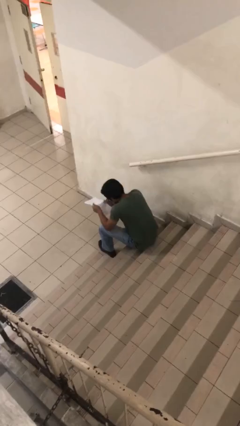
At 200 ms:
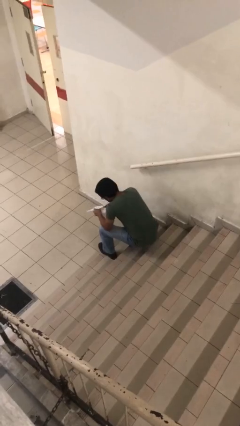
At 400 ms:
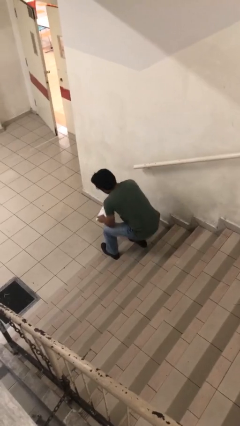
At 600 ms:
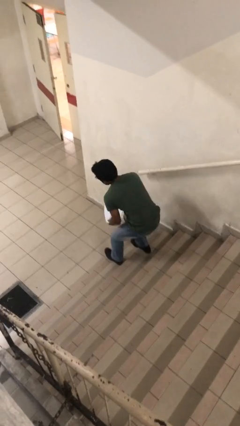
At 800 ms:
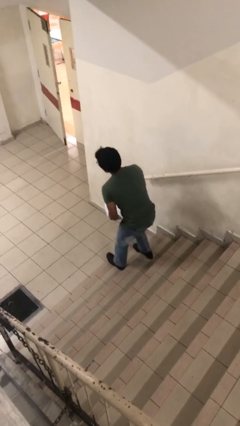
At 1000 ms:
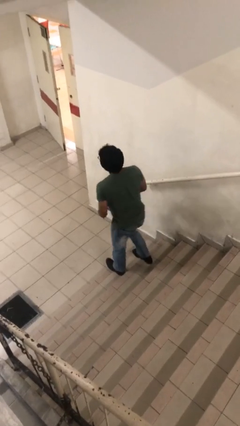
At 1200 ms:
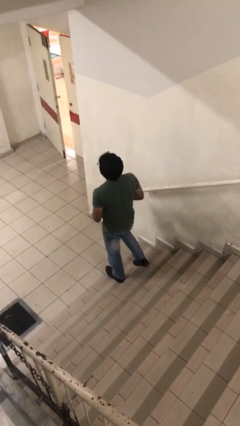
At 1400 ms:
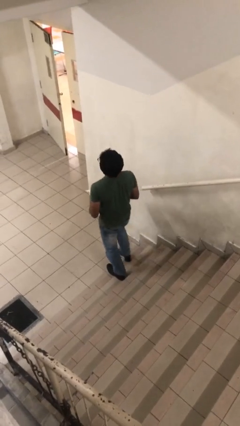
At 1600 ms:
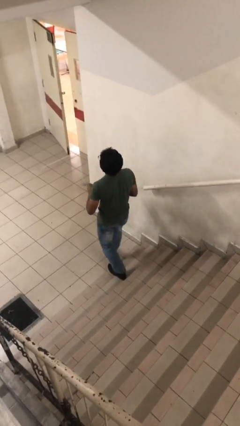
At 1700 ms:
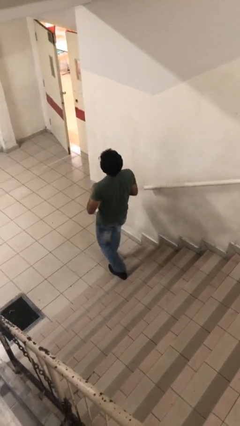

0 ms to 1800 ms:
person stands up

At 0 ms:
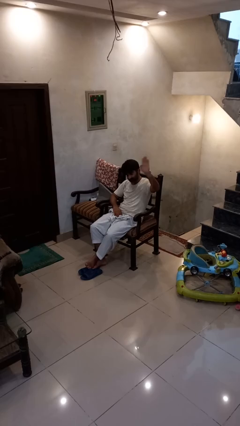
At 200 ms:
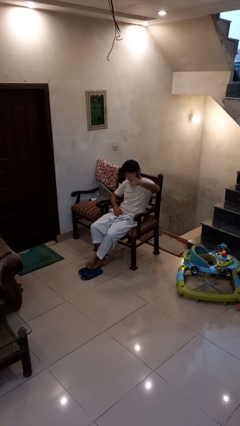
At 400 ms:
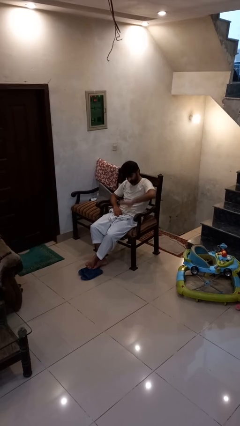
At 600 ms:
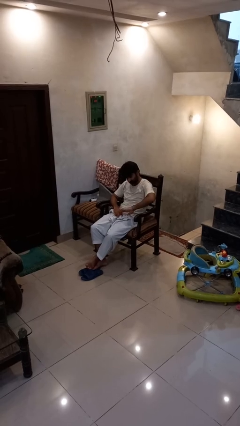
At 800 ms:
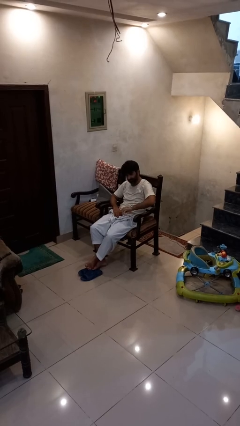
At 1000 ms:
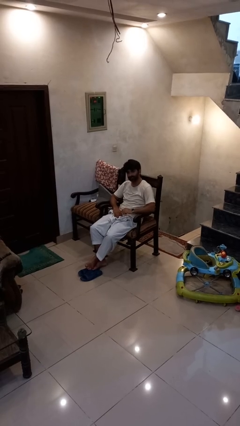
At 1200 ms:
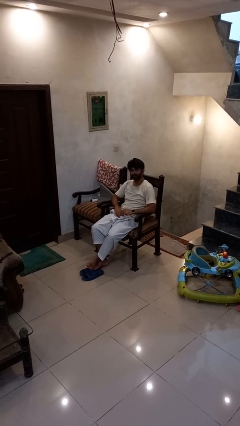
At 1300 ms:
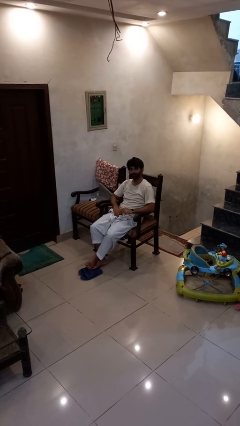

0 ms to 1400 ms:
person gestures swipe down

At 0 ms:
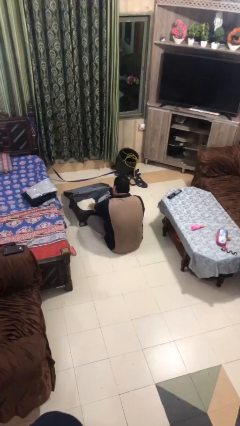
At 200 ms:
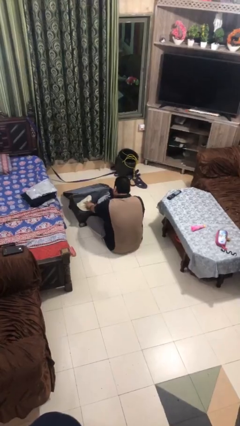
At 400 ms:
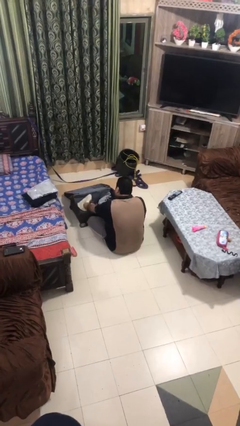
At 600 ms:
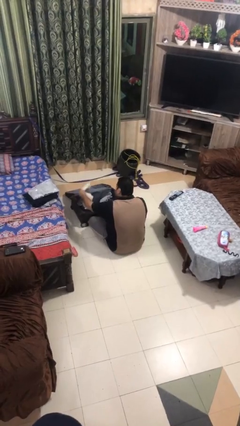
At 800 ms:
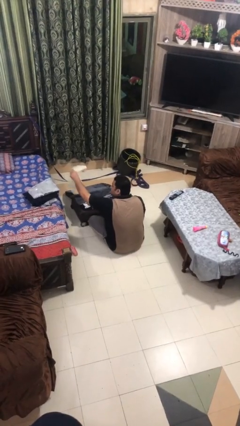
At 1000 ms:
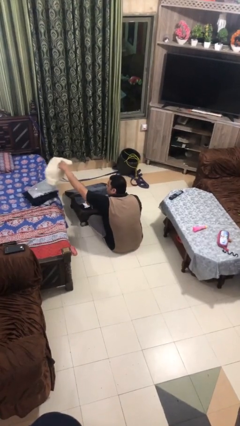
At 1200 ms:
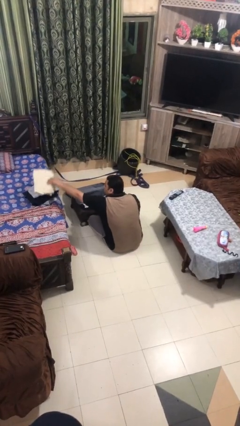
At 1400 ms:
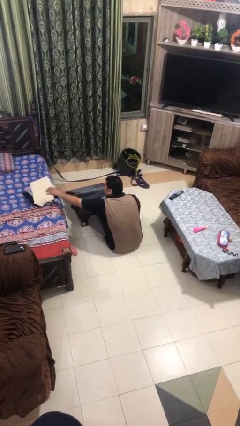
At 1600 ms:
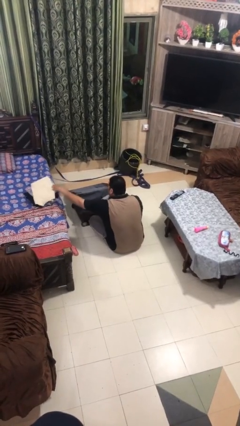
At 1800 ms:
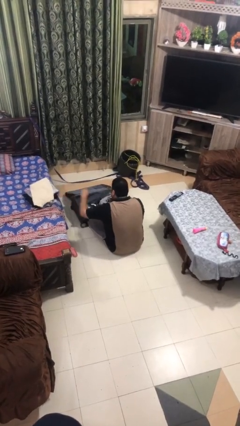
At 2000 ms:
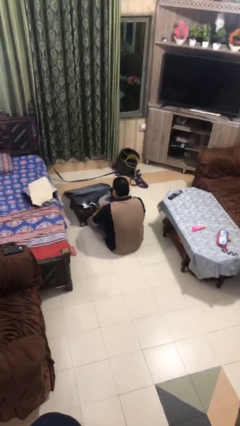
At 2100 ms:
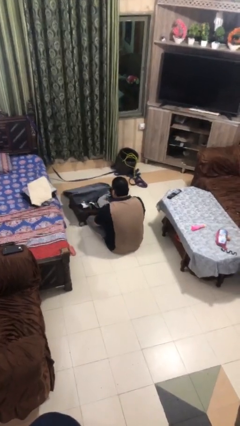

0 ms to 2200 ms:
person unloads clothes from suitcase

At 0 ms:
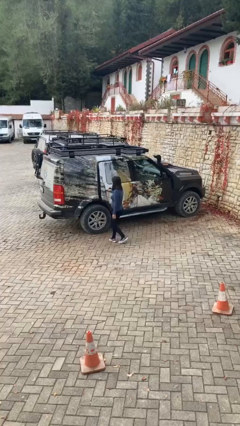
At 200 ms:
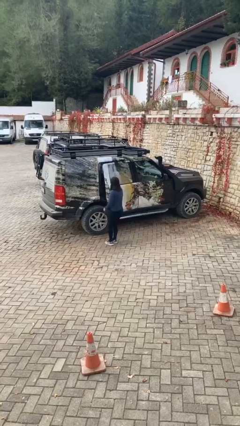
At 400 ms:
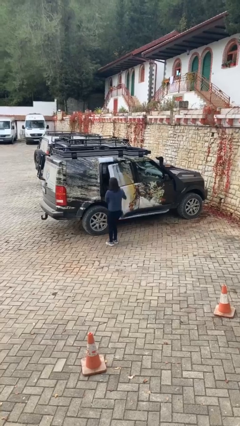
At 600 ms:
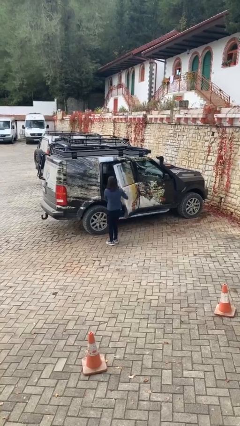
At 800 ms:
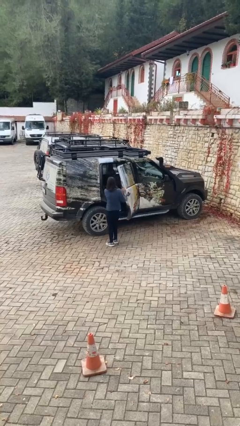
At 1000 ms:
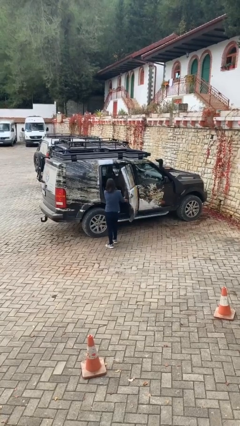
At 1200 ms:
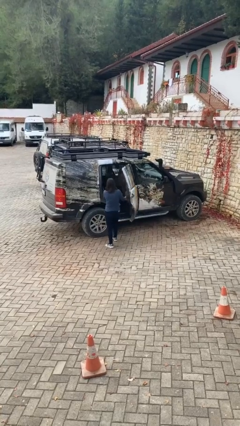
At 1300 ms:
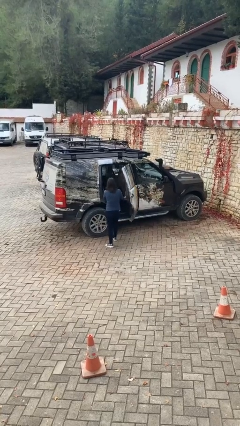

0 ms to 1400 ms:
person opens car door

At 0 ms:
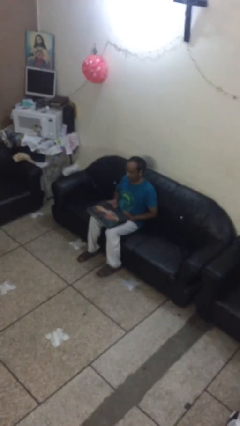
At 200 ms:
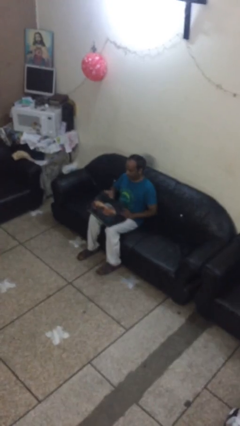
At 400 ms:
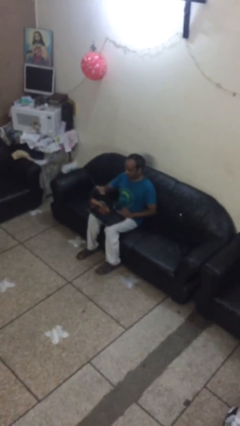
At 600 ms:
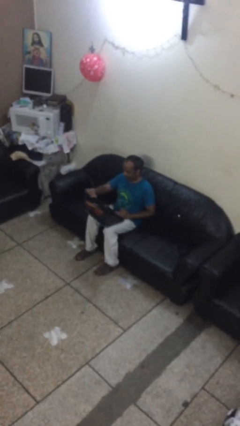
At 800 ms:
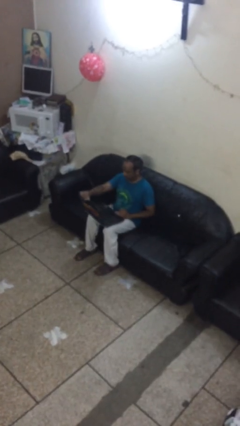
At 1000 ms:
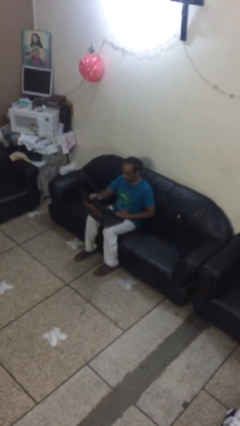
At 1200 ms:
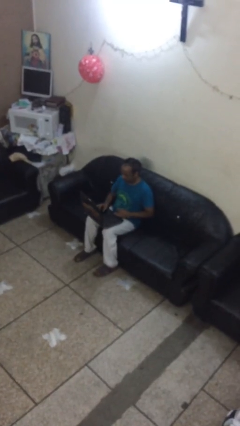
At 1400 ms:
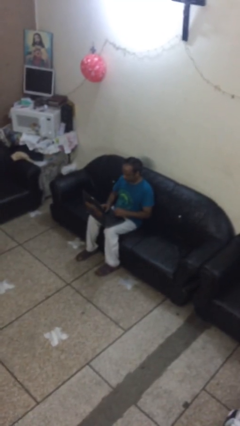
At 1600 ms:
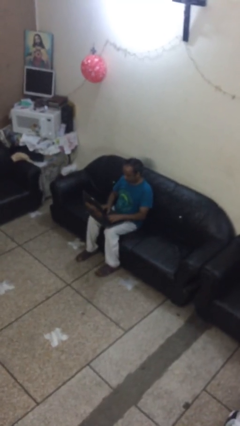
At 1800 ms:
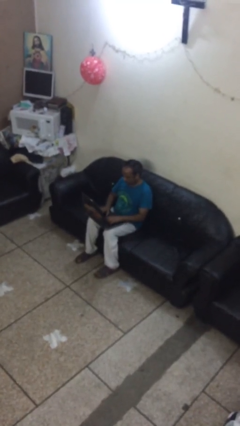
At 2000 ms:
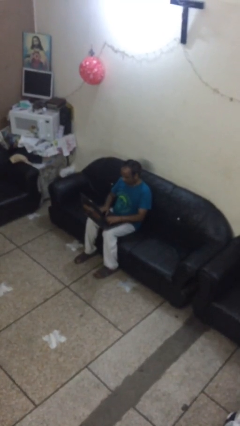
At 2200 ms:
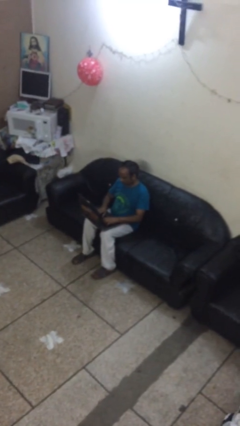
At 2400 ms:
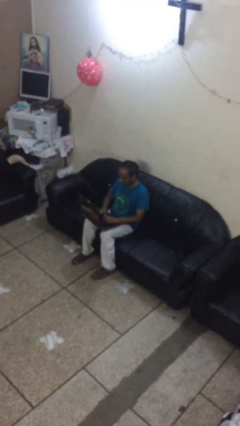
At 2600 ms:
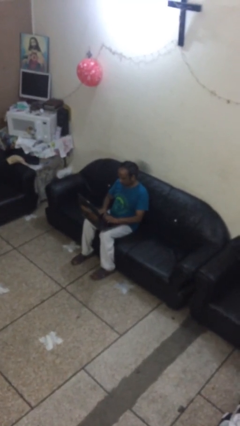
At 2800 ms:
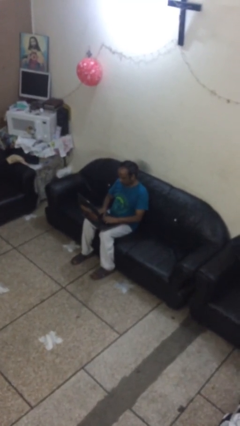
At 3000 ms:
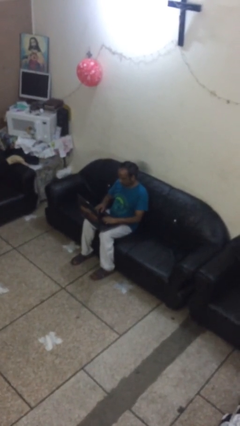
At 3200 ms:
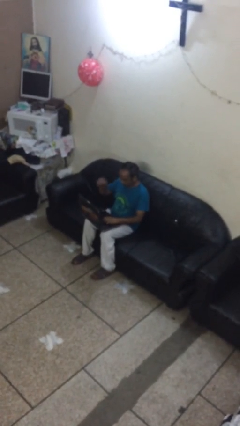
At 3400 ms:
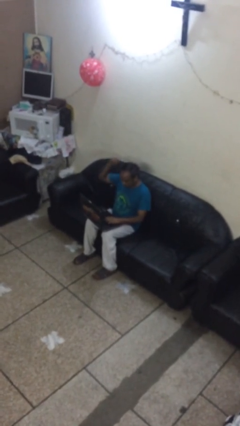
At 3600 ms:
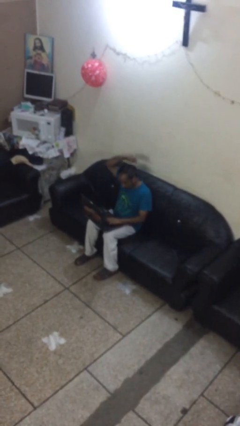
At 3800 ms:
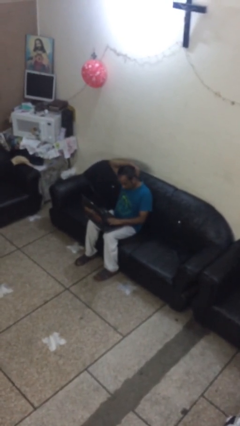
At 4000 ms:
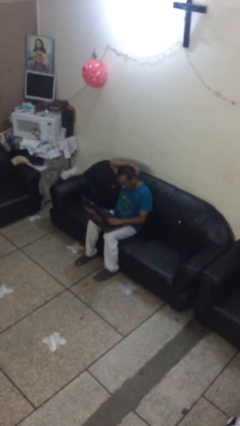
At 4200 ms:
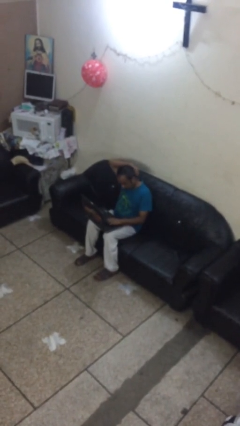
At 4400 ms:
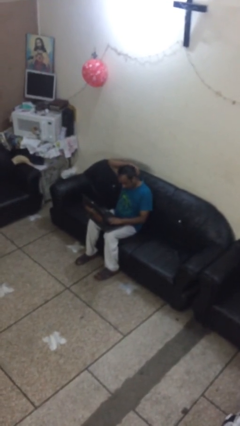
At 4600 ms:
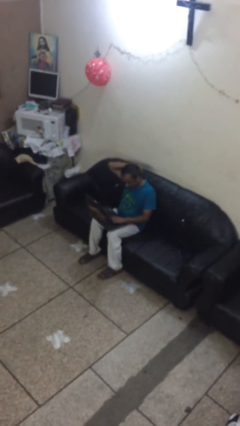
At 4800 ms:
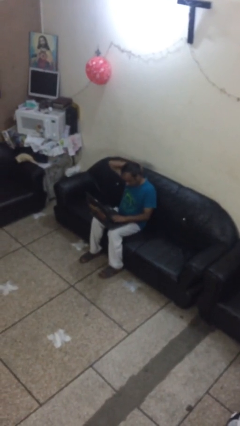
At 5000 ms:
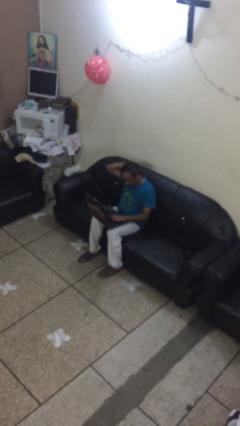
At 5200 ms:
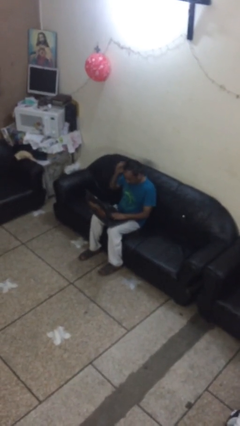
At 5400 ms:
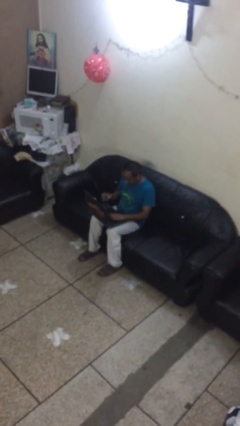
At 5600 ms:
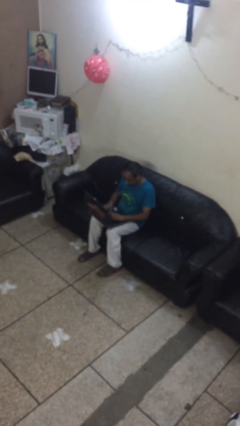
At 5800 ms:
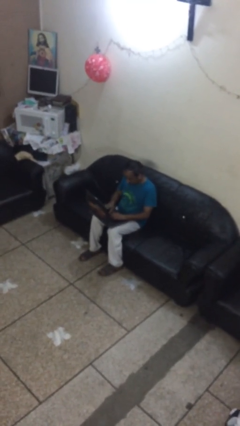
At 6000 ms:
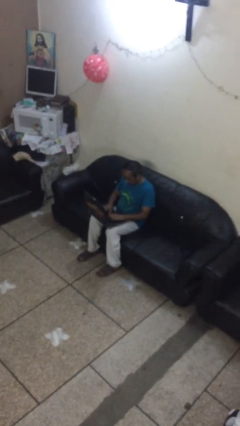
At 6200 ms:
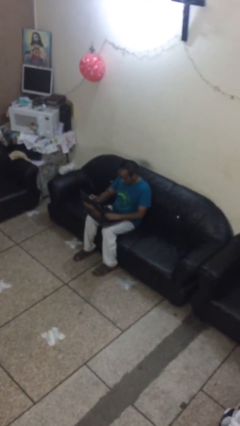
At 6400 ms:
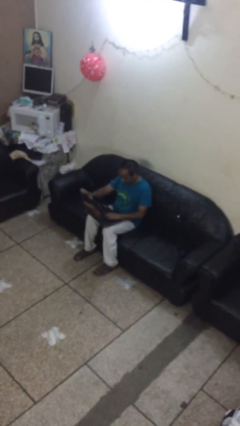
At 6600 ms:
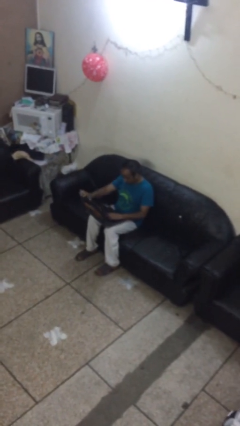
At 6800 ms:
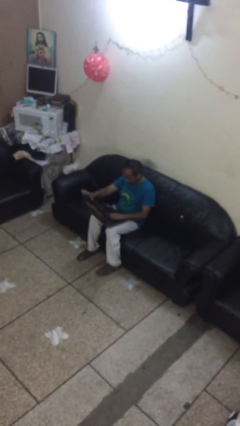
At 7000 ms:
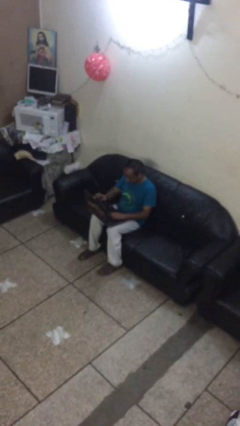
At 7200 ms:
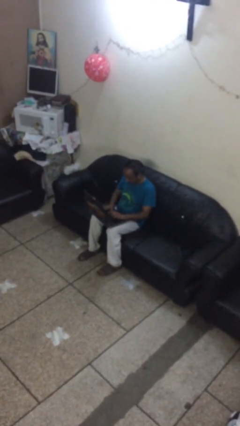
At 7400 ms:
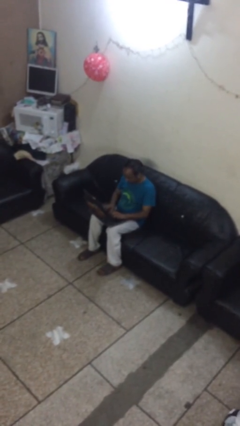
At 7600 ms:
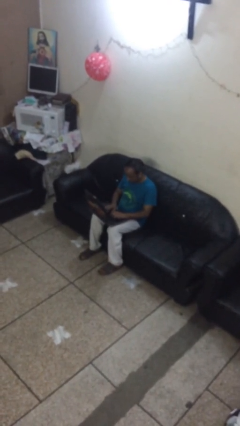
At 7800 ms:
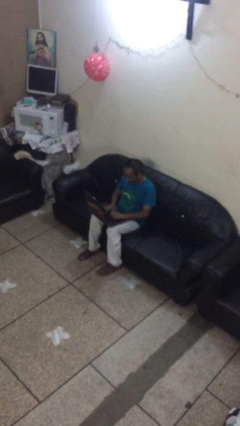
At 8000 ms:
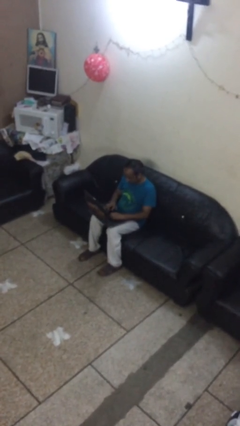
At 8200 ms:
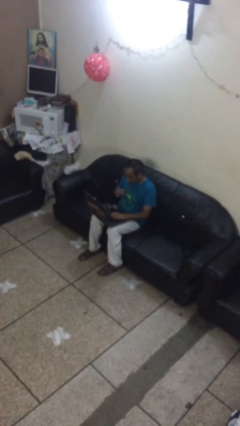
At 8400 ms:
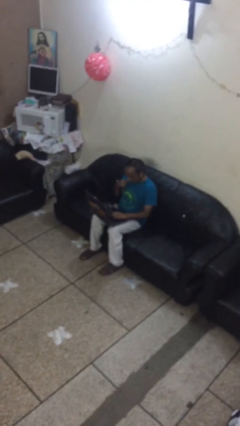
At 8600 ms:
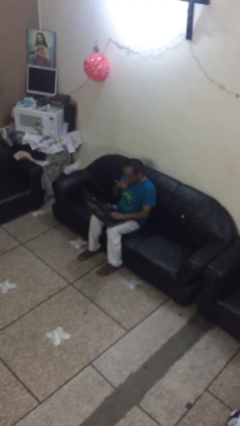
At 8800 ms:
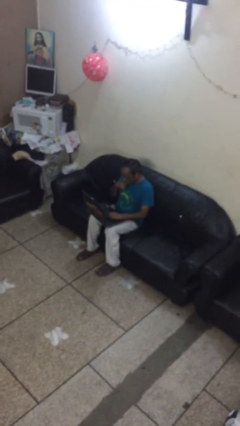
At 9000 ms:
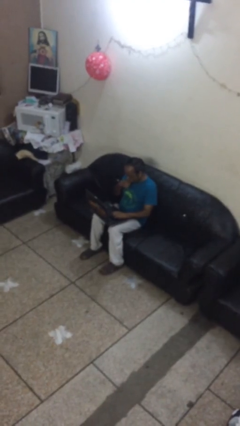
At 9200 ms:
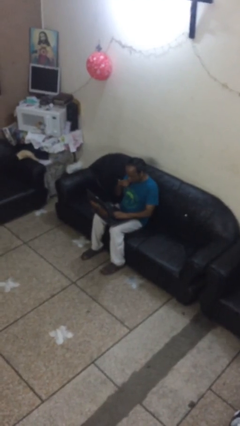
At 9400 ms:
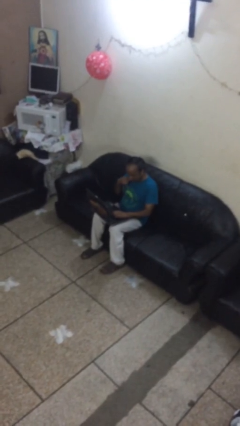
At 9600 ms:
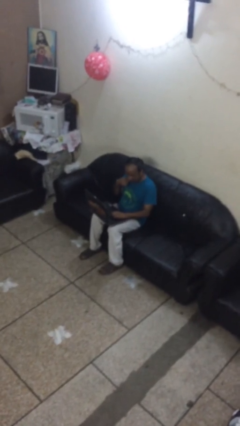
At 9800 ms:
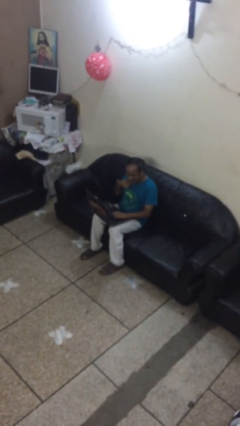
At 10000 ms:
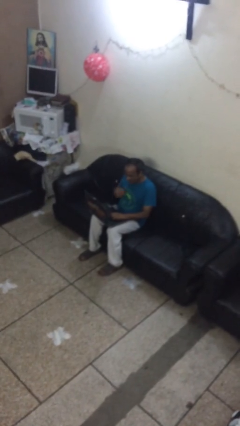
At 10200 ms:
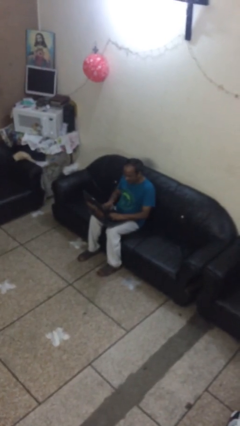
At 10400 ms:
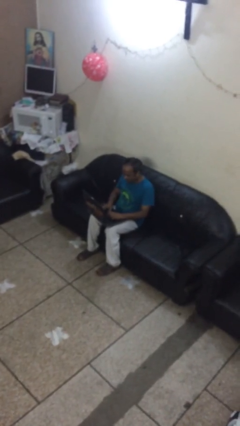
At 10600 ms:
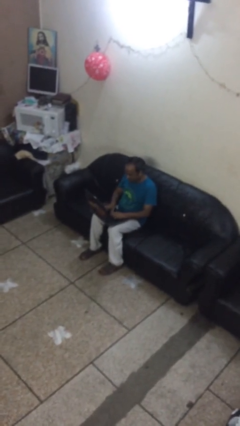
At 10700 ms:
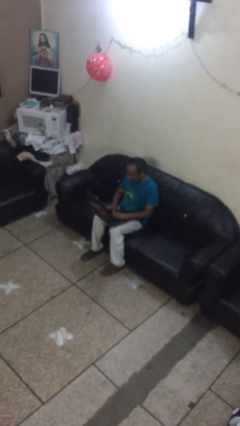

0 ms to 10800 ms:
person interacts with laptop
